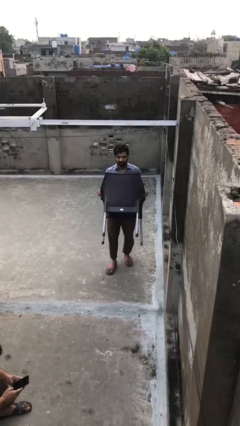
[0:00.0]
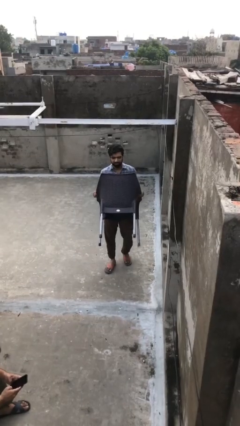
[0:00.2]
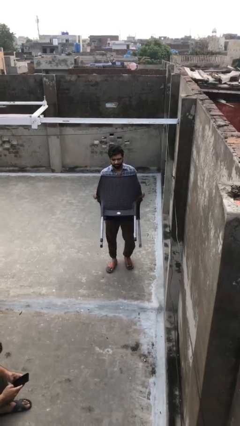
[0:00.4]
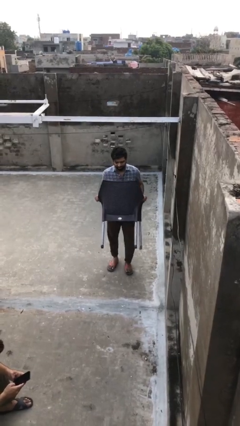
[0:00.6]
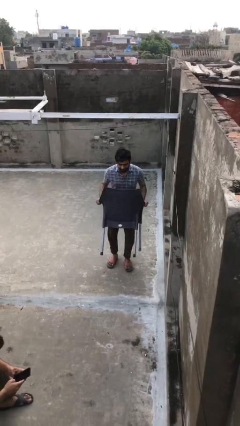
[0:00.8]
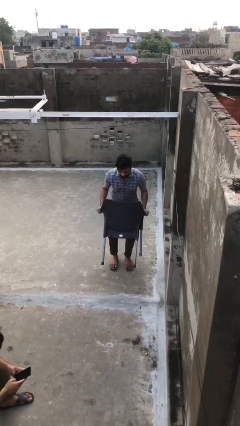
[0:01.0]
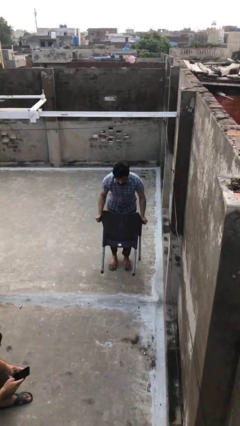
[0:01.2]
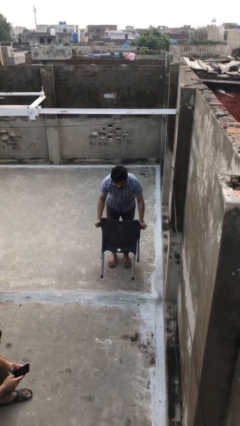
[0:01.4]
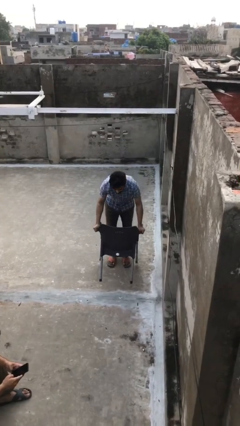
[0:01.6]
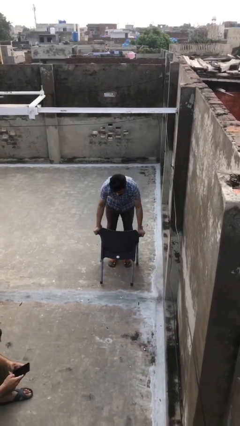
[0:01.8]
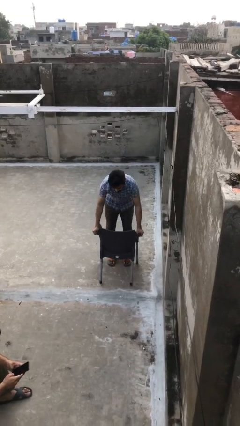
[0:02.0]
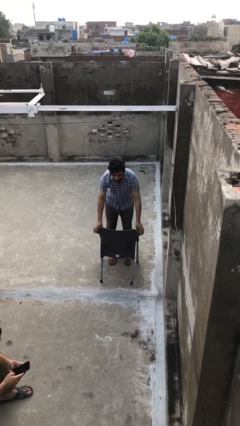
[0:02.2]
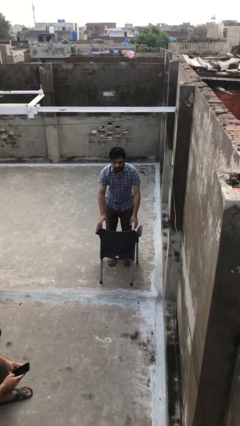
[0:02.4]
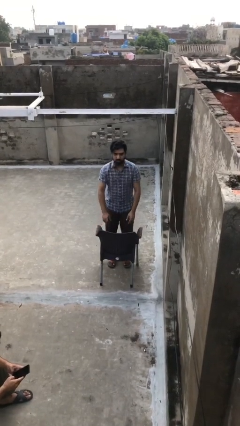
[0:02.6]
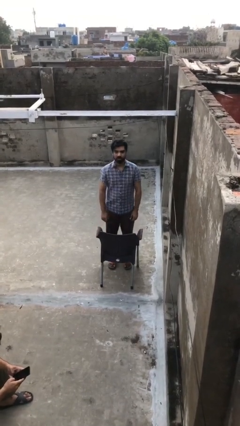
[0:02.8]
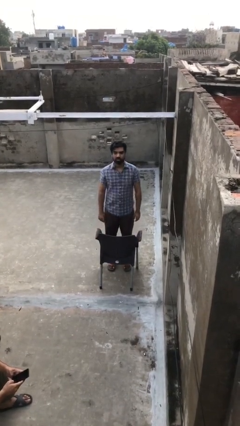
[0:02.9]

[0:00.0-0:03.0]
person puts down object on floor

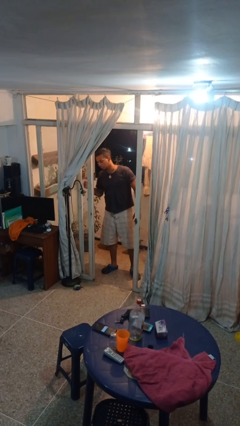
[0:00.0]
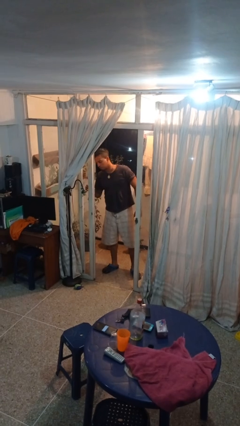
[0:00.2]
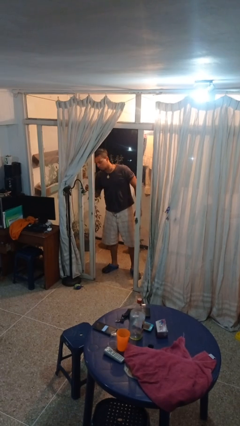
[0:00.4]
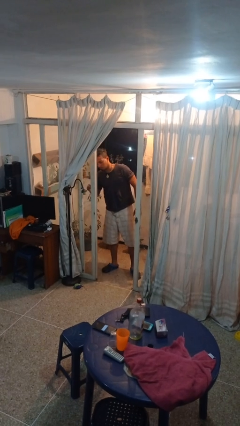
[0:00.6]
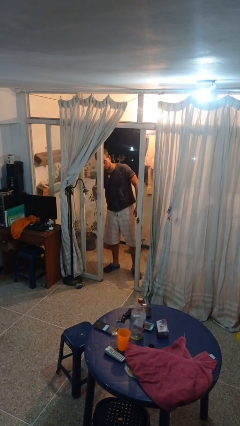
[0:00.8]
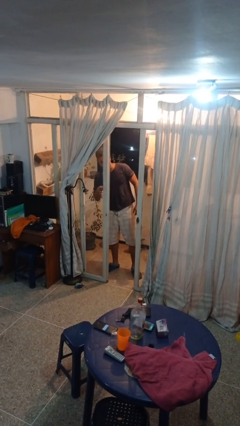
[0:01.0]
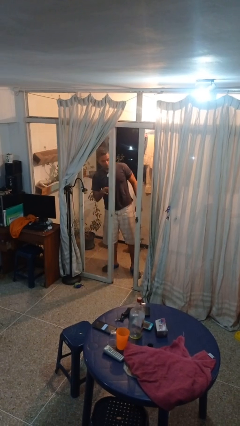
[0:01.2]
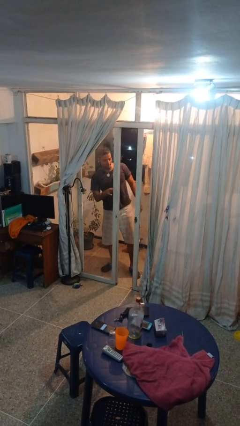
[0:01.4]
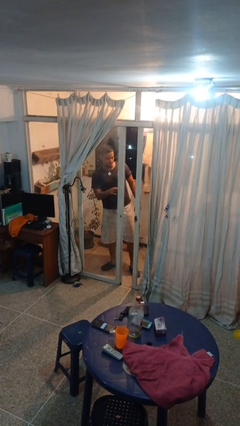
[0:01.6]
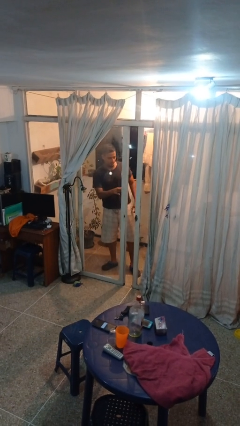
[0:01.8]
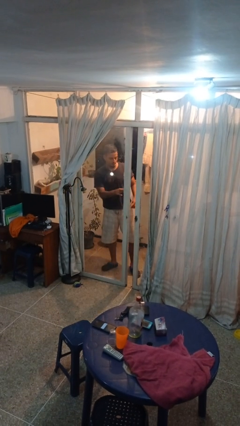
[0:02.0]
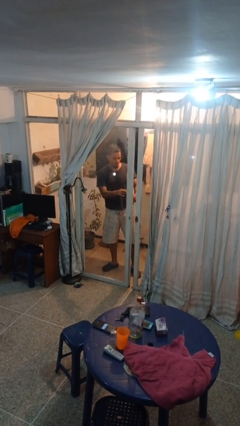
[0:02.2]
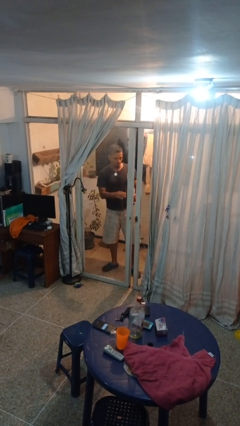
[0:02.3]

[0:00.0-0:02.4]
person closes sliding door

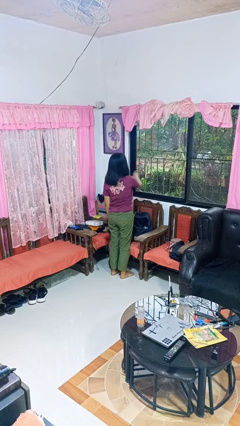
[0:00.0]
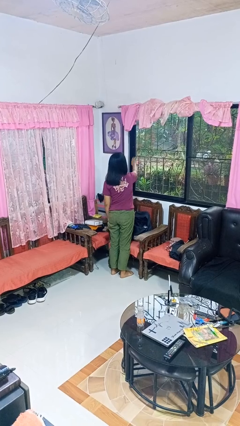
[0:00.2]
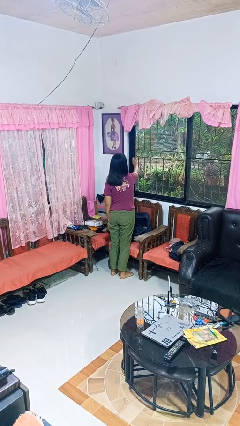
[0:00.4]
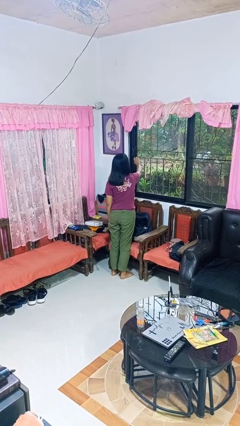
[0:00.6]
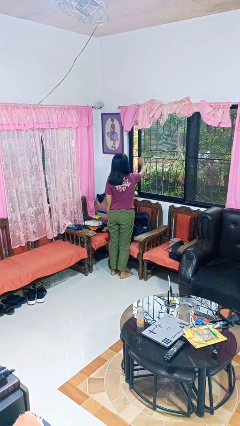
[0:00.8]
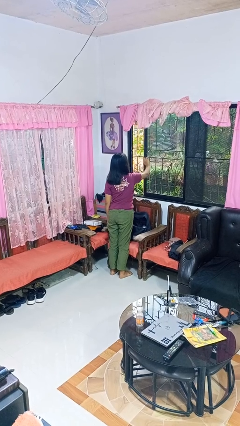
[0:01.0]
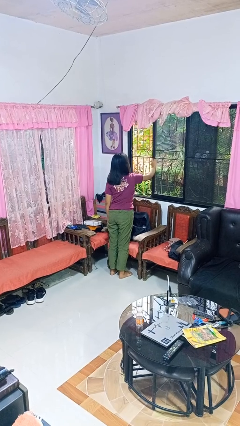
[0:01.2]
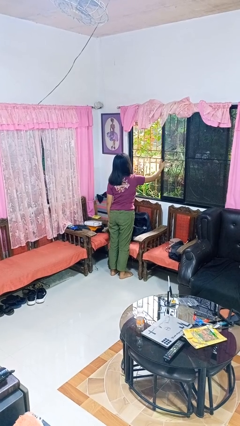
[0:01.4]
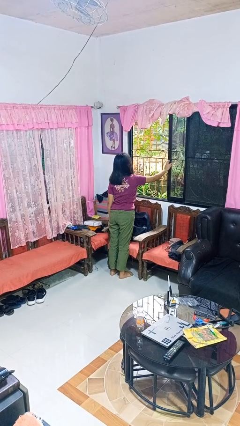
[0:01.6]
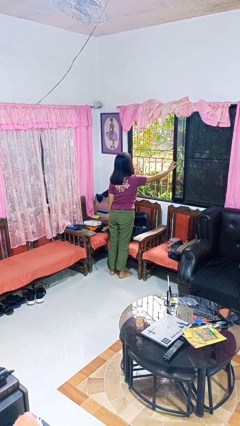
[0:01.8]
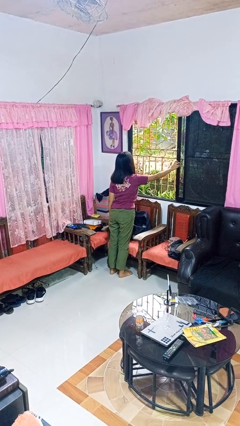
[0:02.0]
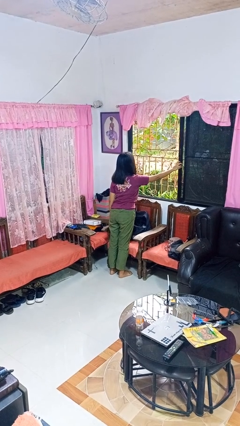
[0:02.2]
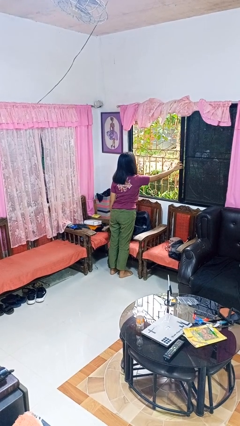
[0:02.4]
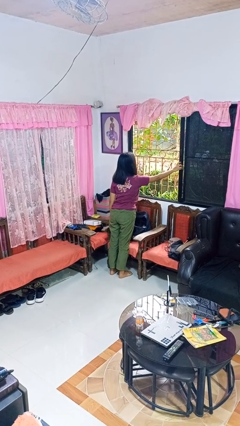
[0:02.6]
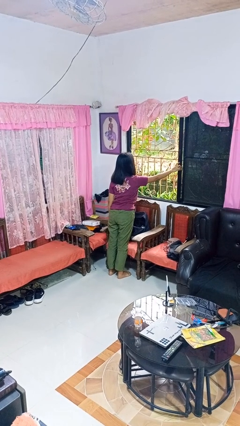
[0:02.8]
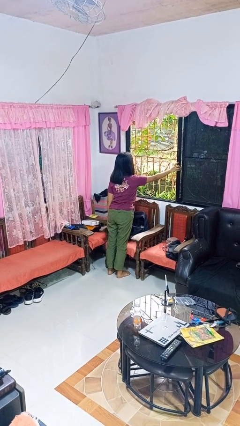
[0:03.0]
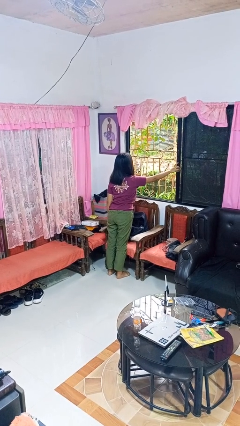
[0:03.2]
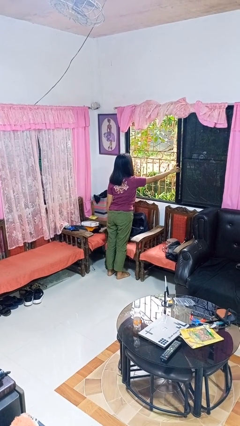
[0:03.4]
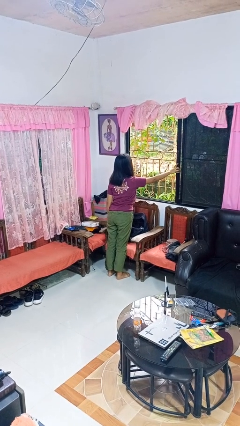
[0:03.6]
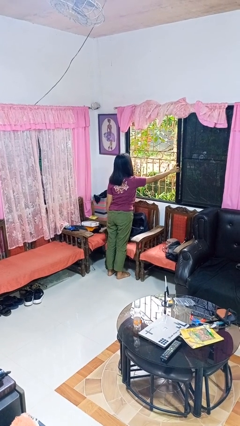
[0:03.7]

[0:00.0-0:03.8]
person opens home window

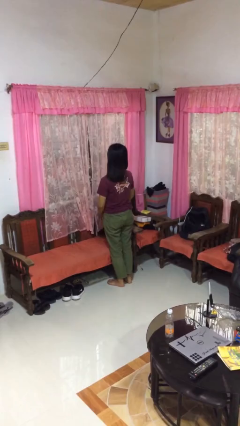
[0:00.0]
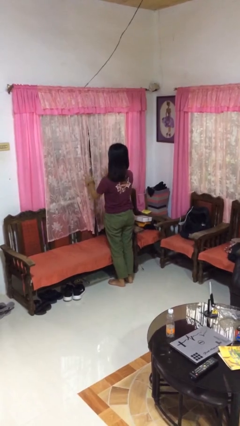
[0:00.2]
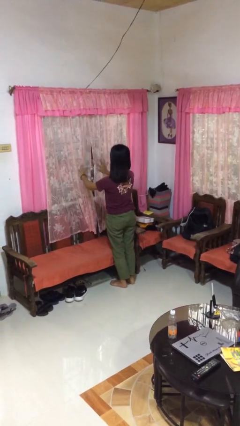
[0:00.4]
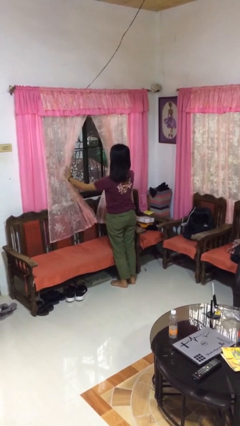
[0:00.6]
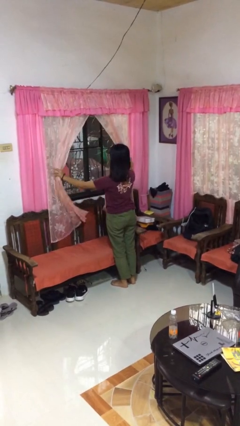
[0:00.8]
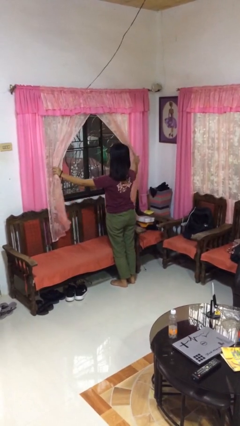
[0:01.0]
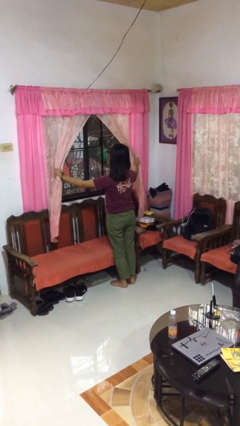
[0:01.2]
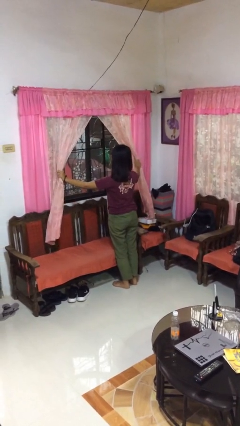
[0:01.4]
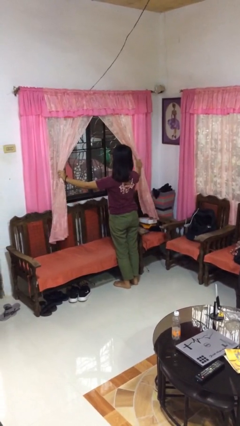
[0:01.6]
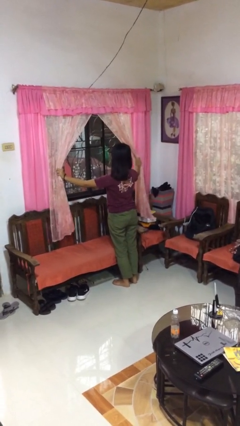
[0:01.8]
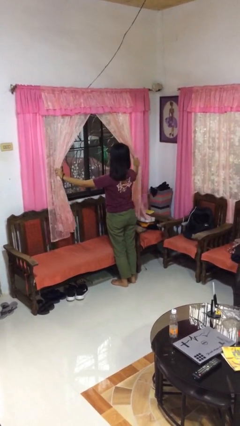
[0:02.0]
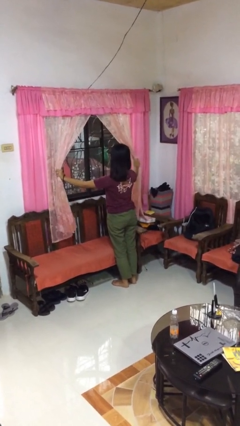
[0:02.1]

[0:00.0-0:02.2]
person opens curtains

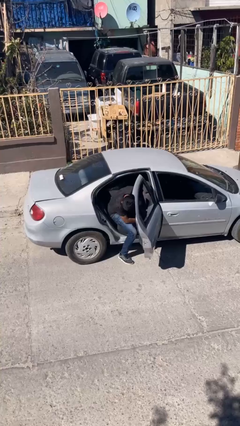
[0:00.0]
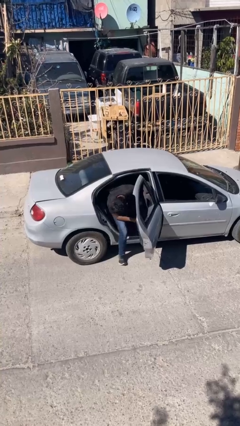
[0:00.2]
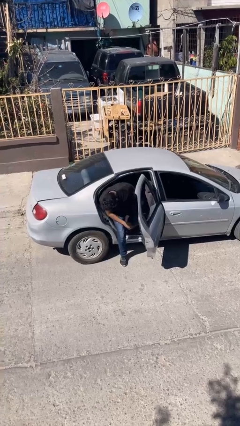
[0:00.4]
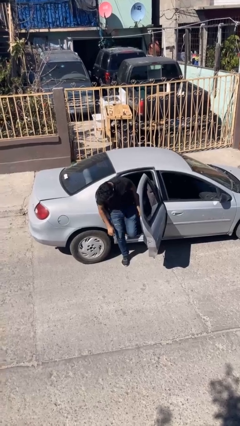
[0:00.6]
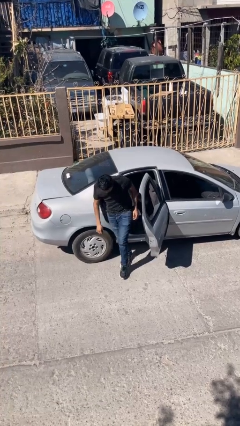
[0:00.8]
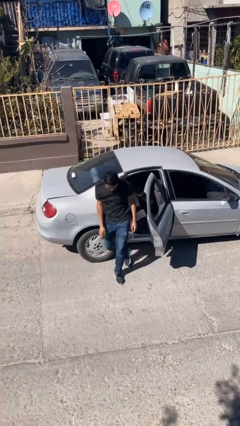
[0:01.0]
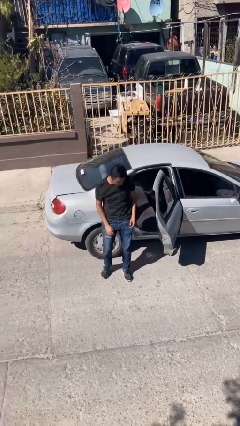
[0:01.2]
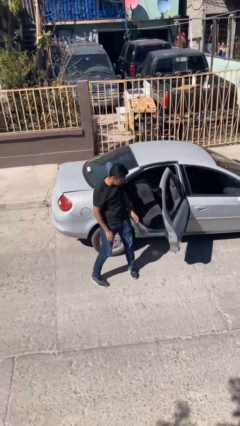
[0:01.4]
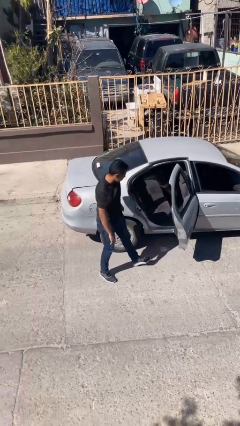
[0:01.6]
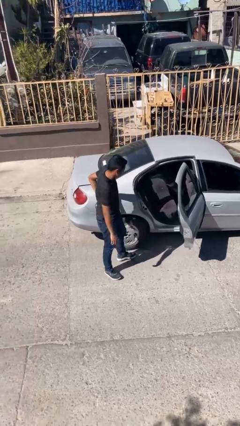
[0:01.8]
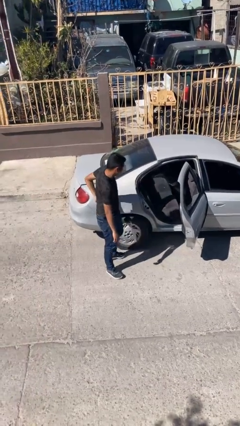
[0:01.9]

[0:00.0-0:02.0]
person exits car

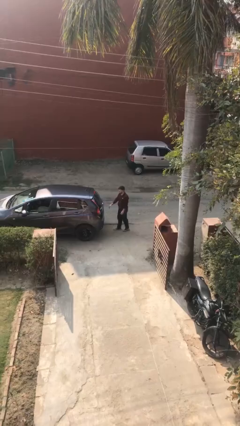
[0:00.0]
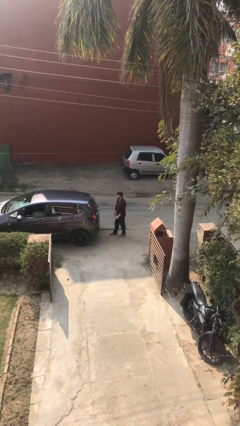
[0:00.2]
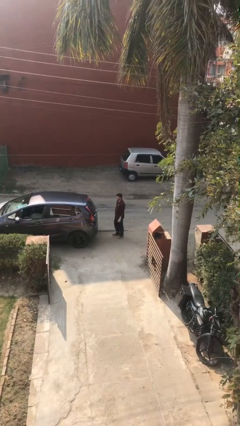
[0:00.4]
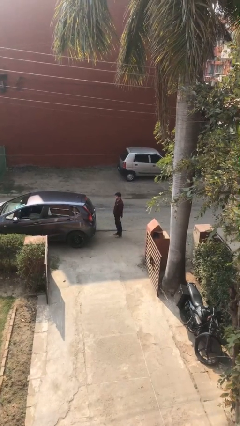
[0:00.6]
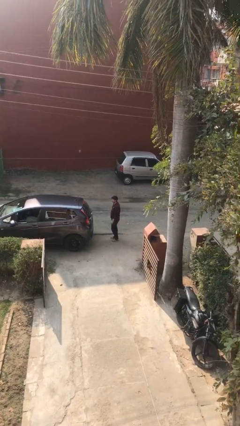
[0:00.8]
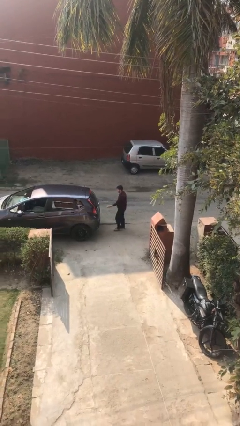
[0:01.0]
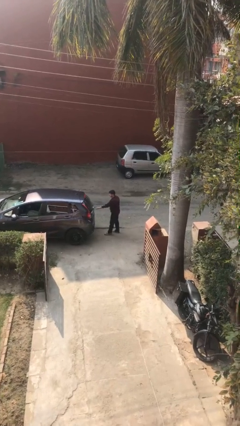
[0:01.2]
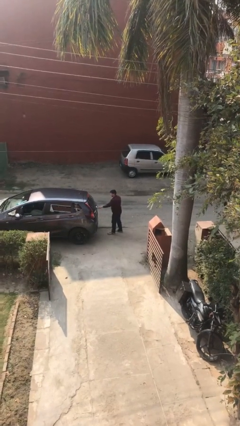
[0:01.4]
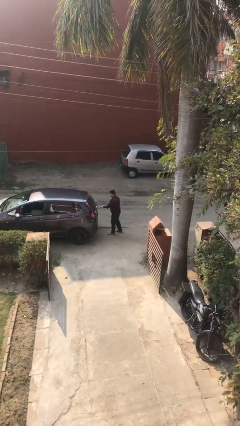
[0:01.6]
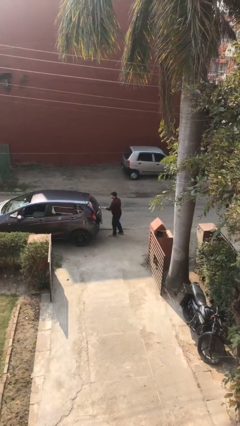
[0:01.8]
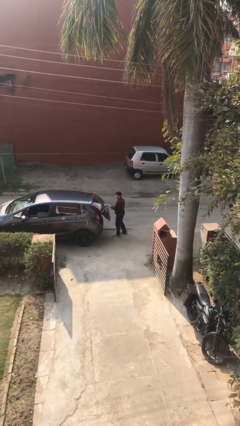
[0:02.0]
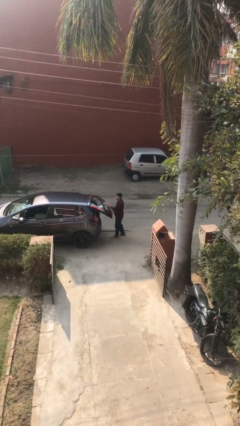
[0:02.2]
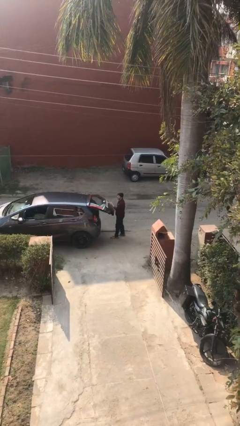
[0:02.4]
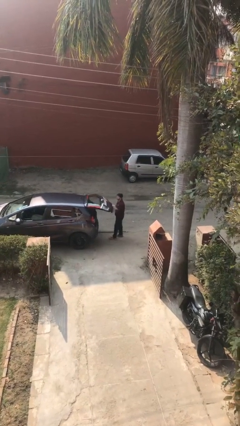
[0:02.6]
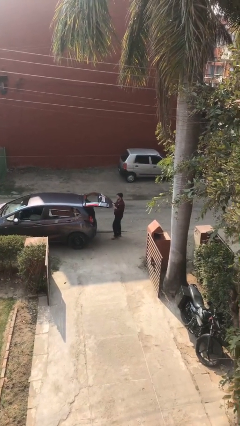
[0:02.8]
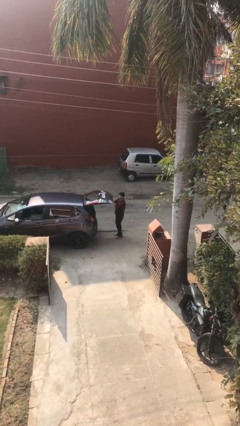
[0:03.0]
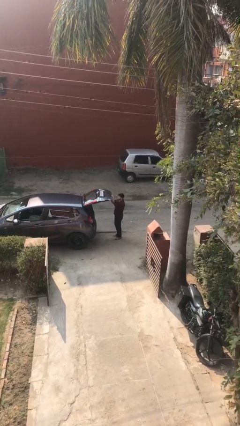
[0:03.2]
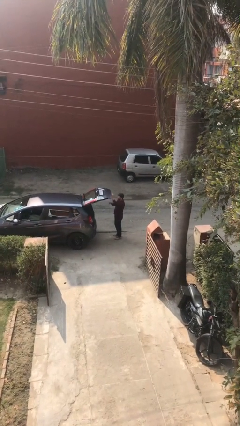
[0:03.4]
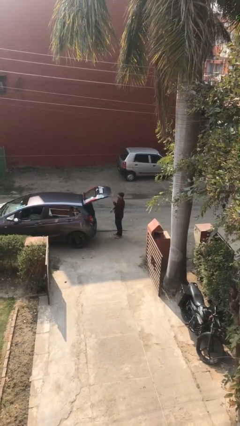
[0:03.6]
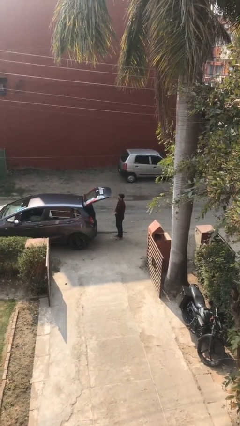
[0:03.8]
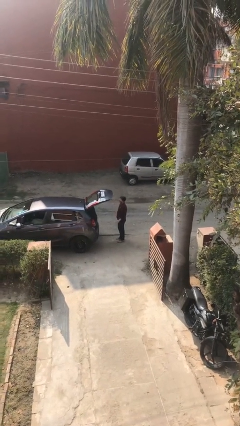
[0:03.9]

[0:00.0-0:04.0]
person opens car trunk
